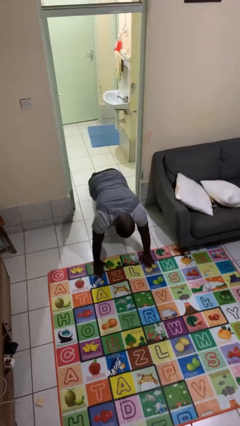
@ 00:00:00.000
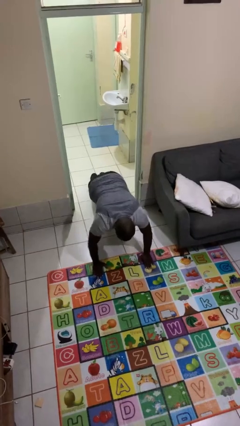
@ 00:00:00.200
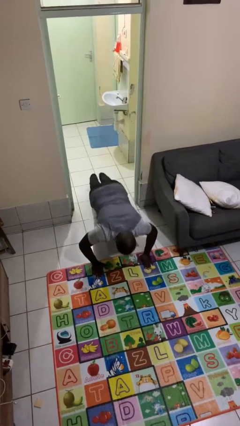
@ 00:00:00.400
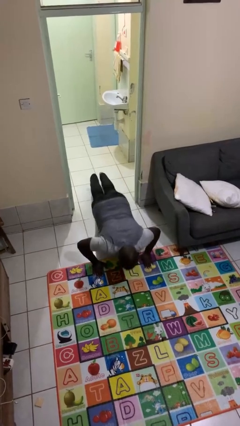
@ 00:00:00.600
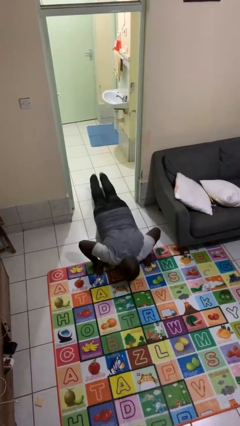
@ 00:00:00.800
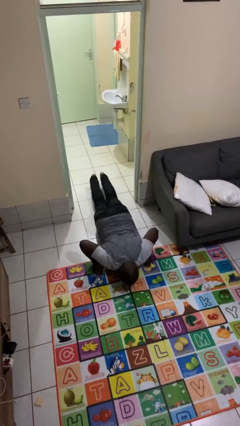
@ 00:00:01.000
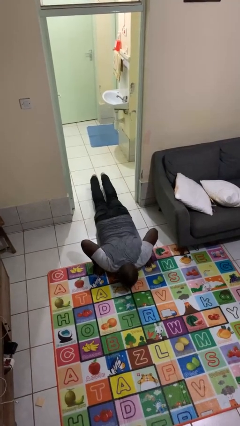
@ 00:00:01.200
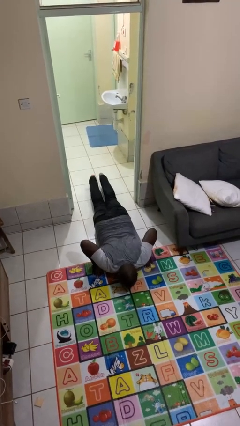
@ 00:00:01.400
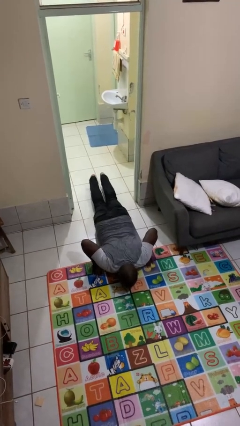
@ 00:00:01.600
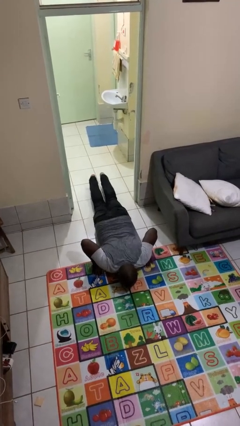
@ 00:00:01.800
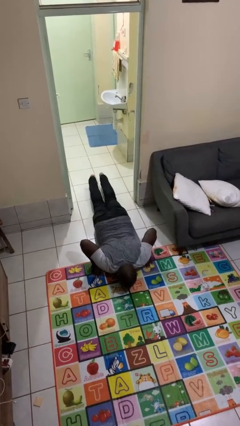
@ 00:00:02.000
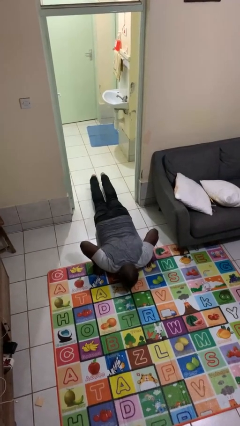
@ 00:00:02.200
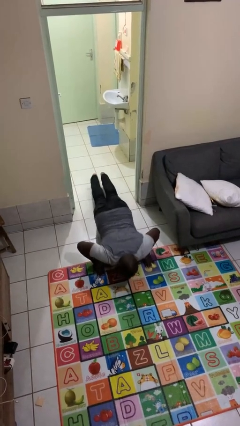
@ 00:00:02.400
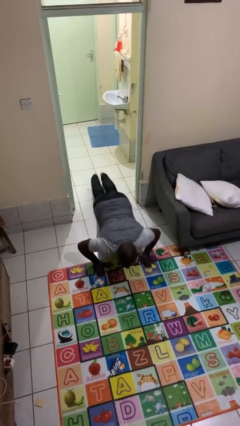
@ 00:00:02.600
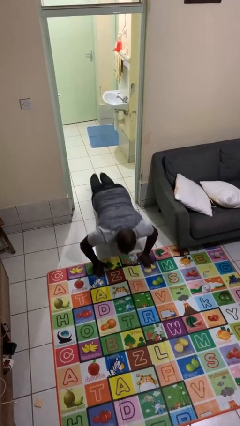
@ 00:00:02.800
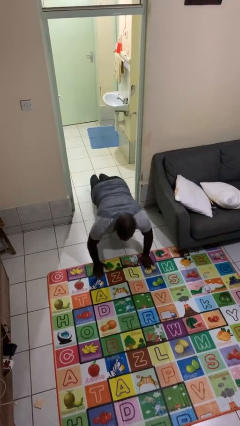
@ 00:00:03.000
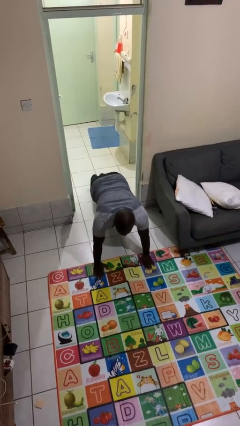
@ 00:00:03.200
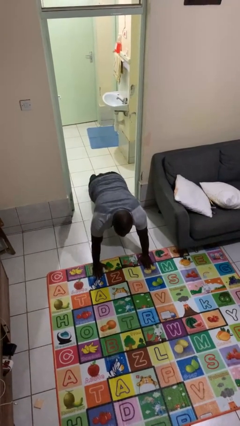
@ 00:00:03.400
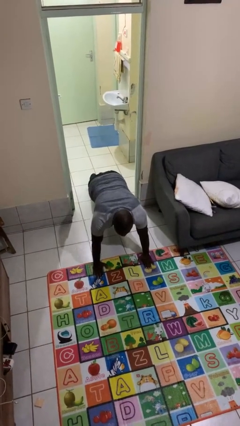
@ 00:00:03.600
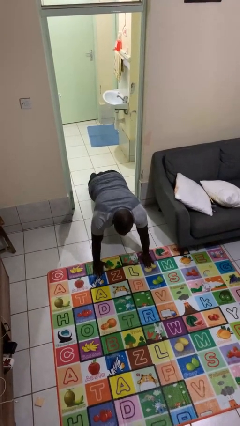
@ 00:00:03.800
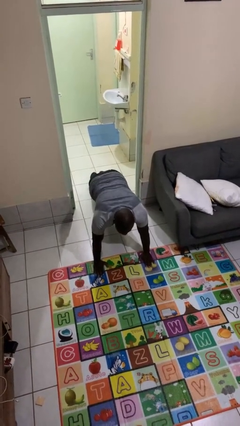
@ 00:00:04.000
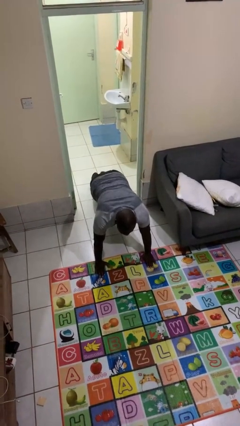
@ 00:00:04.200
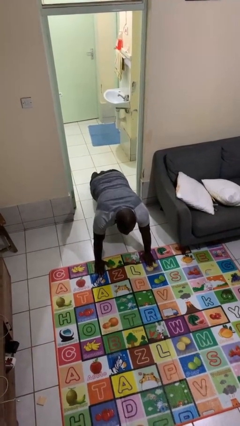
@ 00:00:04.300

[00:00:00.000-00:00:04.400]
person exercises with pushup

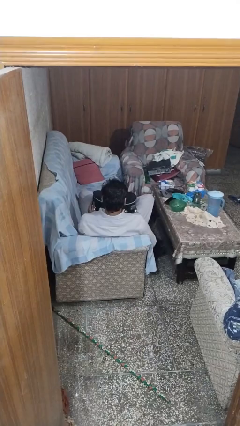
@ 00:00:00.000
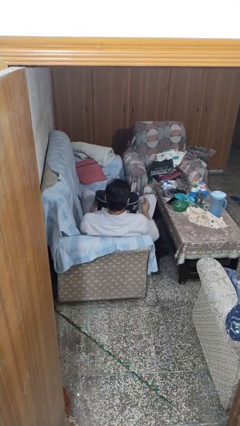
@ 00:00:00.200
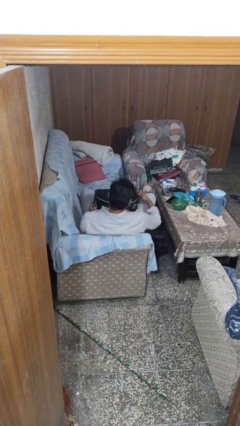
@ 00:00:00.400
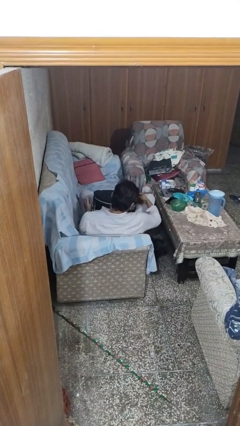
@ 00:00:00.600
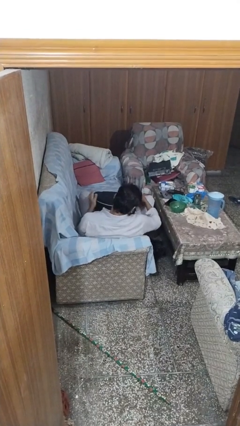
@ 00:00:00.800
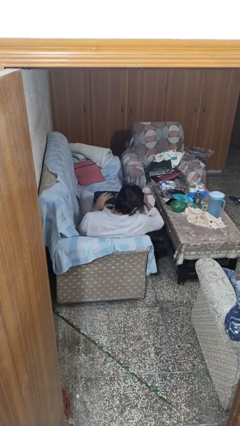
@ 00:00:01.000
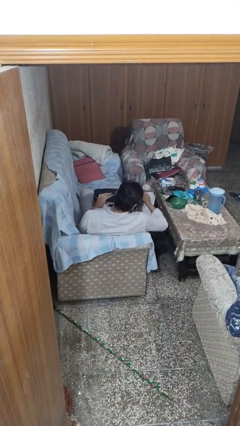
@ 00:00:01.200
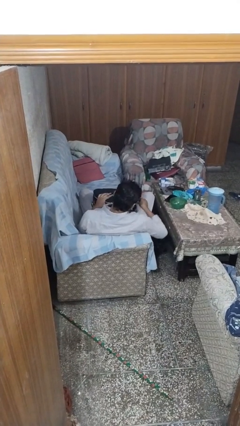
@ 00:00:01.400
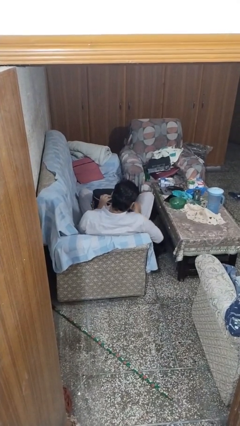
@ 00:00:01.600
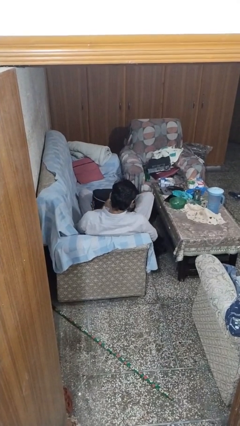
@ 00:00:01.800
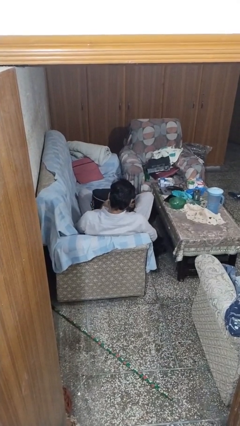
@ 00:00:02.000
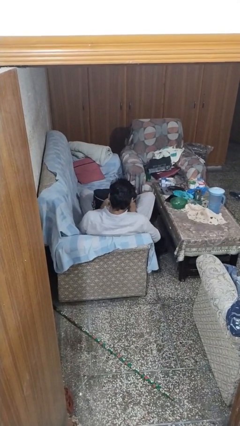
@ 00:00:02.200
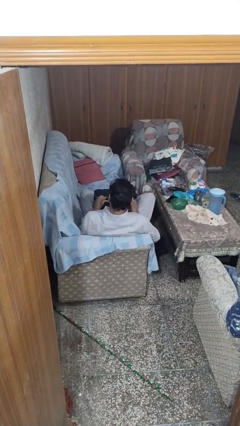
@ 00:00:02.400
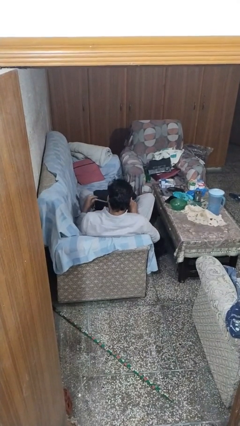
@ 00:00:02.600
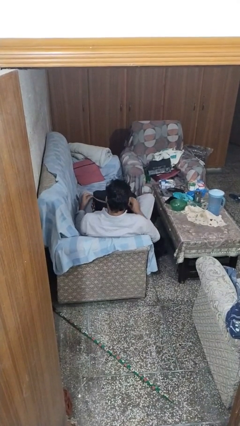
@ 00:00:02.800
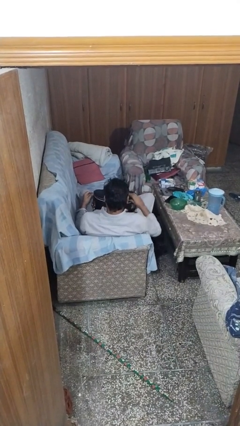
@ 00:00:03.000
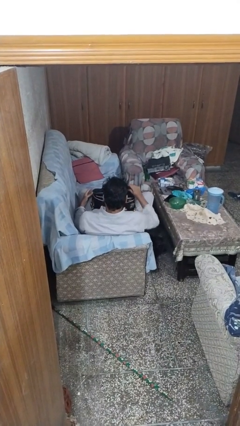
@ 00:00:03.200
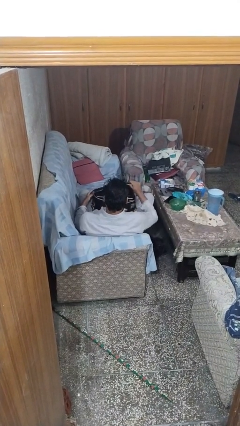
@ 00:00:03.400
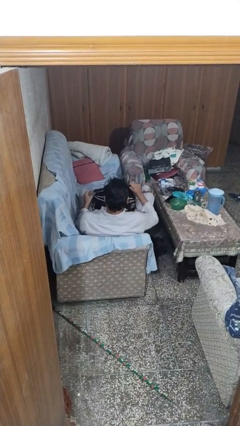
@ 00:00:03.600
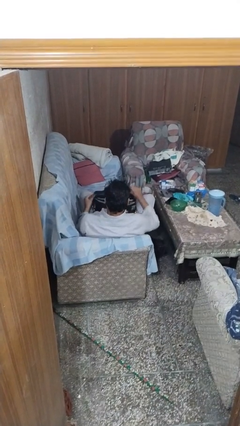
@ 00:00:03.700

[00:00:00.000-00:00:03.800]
person opens suitcase

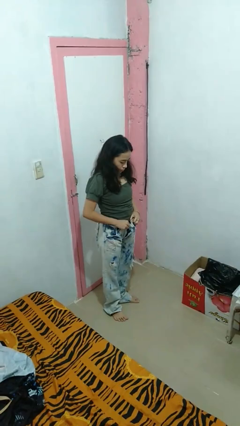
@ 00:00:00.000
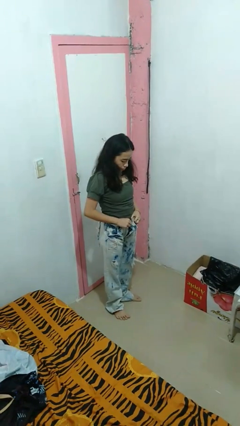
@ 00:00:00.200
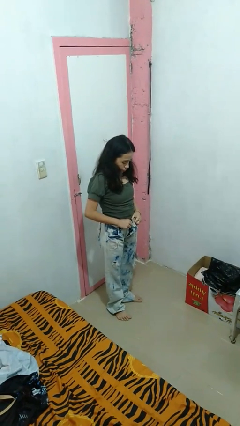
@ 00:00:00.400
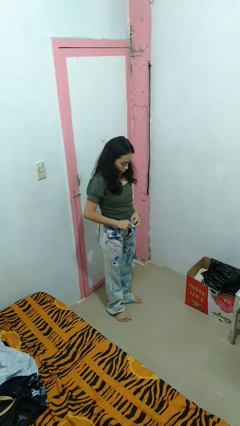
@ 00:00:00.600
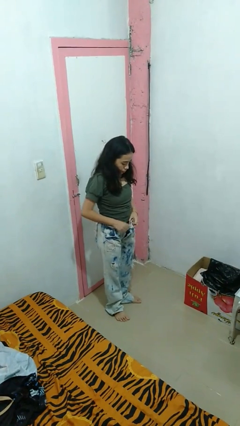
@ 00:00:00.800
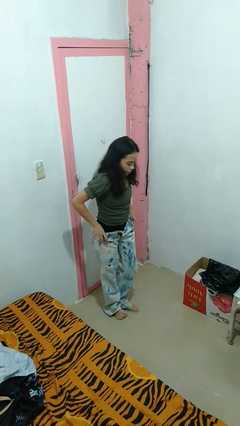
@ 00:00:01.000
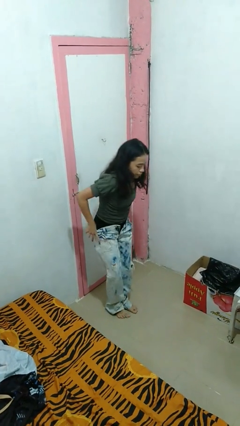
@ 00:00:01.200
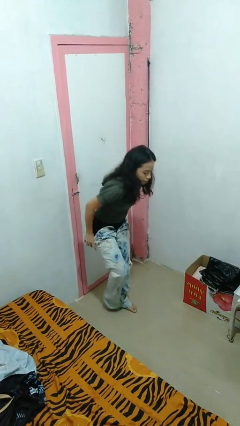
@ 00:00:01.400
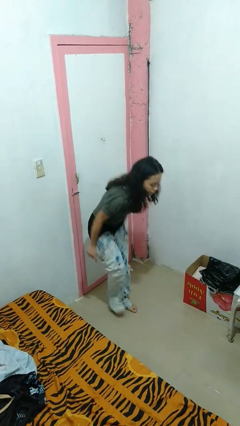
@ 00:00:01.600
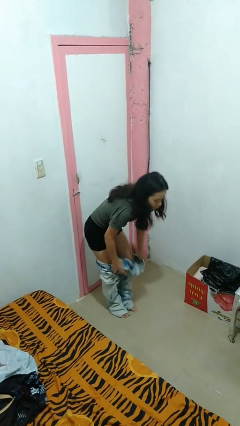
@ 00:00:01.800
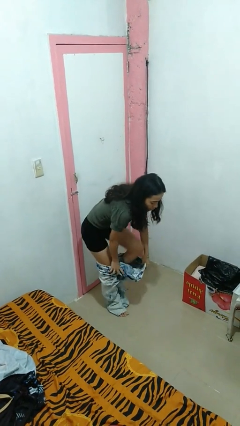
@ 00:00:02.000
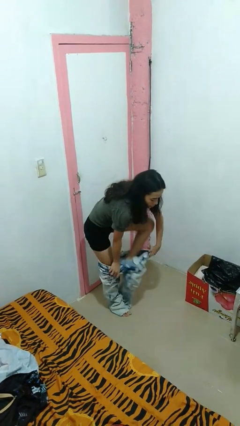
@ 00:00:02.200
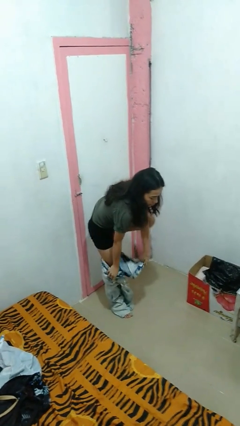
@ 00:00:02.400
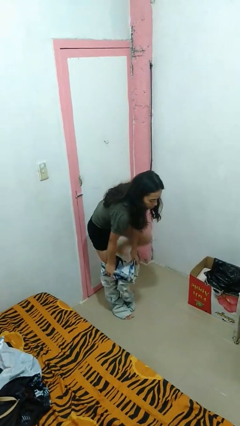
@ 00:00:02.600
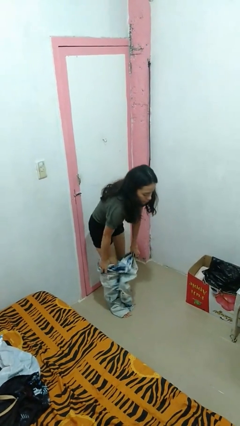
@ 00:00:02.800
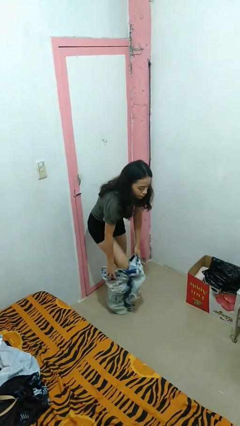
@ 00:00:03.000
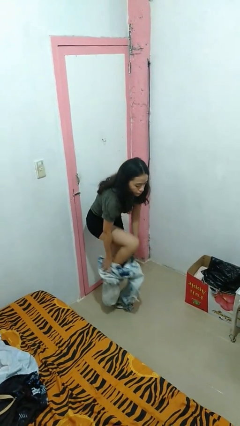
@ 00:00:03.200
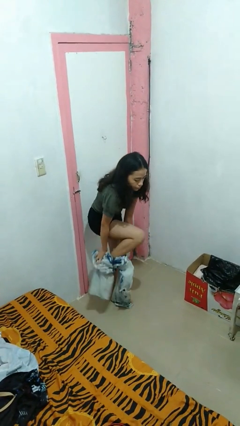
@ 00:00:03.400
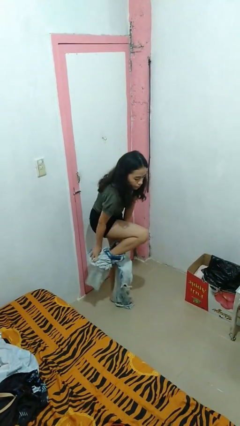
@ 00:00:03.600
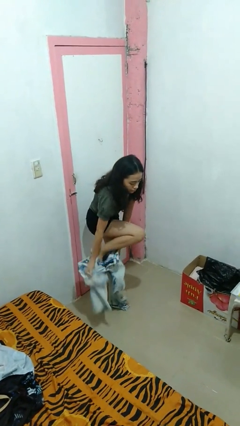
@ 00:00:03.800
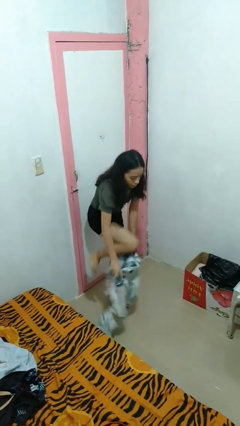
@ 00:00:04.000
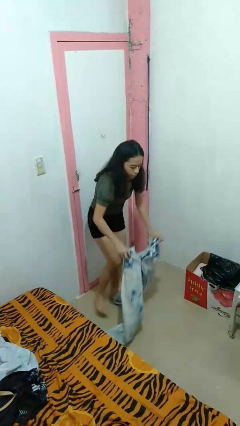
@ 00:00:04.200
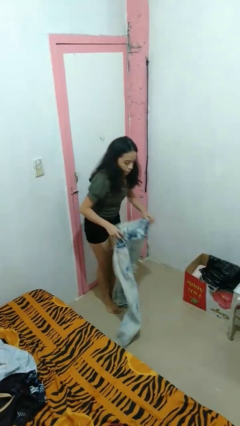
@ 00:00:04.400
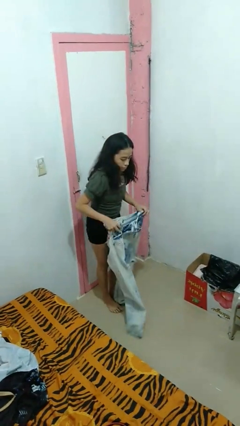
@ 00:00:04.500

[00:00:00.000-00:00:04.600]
person takes off pants

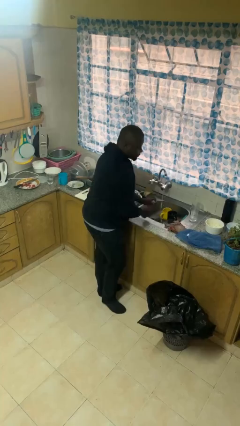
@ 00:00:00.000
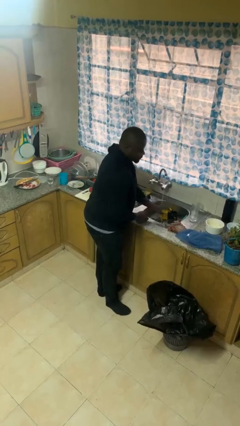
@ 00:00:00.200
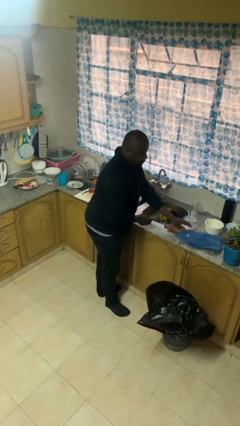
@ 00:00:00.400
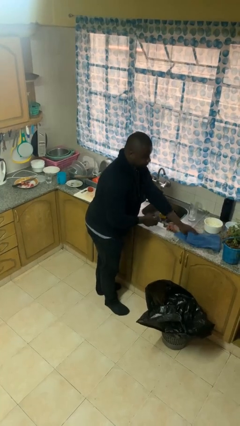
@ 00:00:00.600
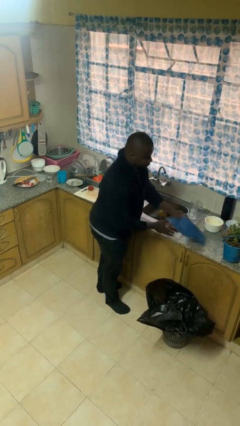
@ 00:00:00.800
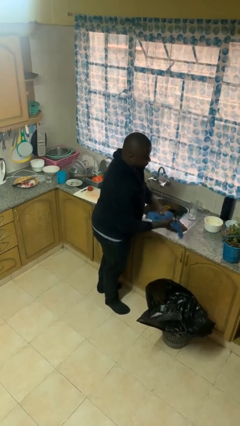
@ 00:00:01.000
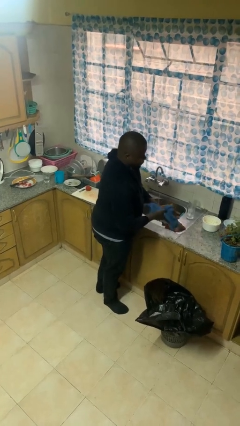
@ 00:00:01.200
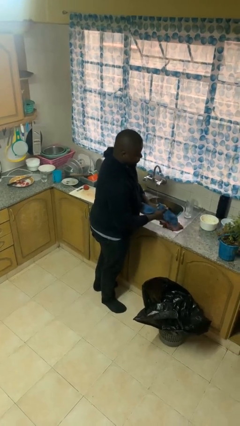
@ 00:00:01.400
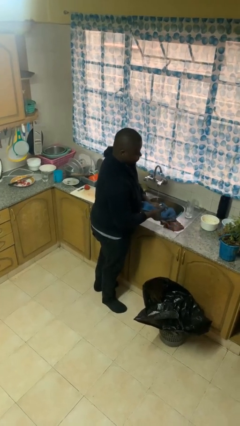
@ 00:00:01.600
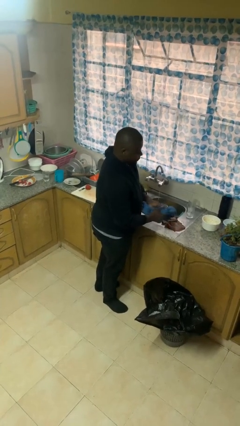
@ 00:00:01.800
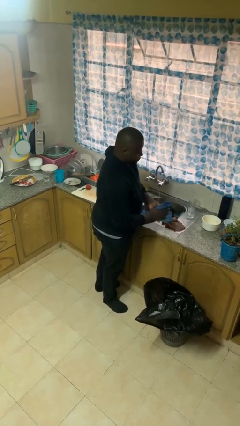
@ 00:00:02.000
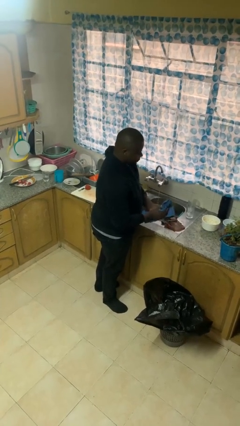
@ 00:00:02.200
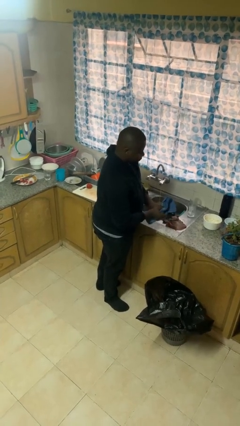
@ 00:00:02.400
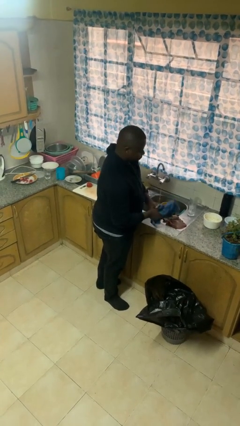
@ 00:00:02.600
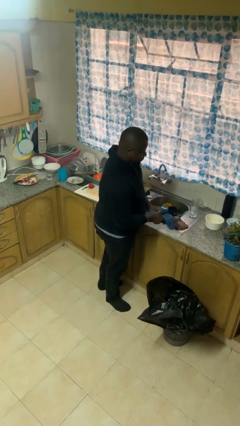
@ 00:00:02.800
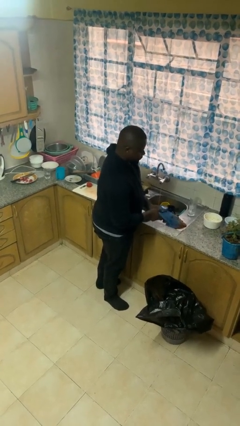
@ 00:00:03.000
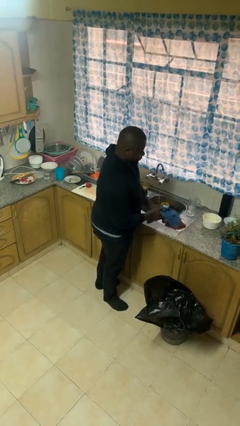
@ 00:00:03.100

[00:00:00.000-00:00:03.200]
person dries hands with towel

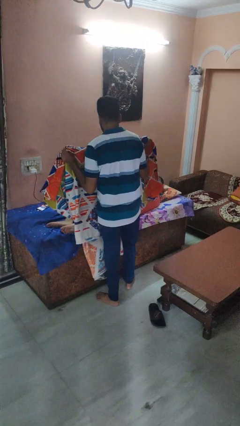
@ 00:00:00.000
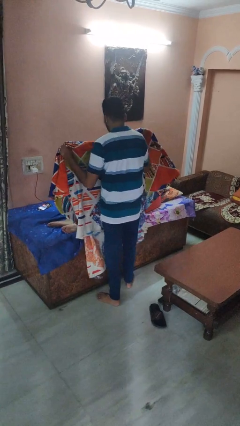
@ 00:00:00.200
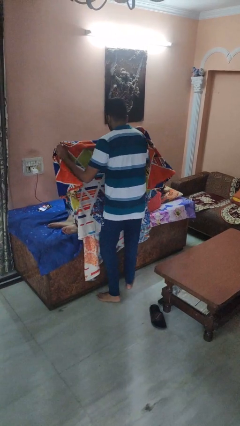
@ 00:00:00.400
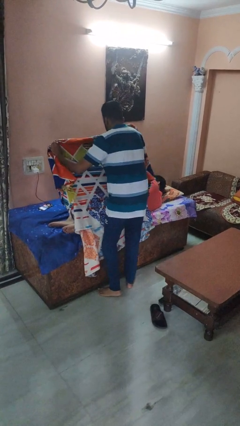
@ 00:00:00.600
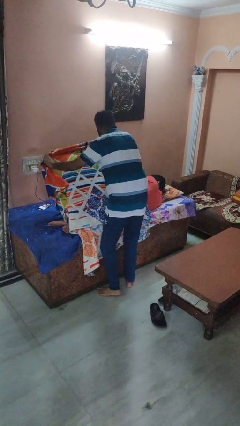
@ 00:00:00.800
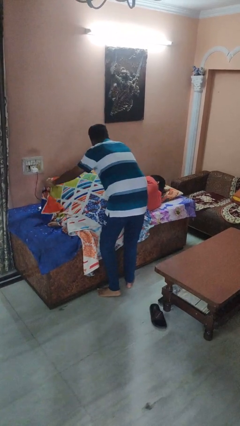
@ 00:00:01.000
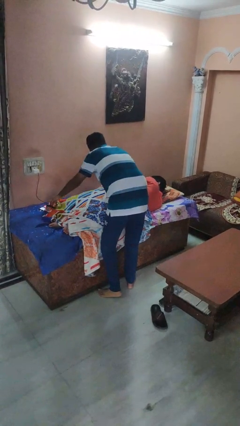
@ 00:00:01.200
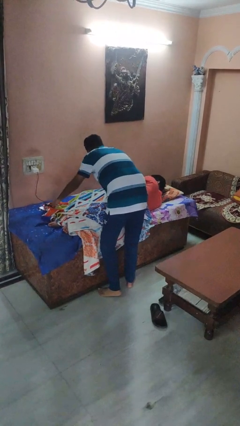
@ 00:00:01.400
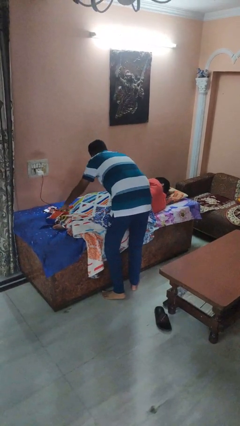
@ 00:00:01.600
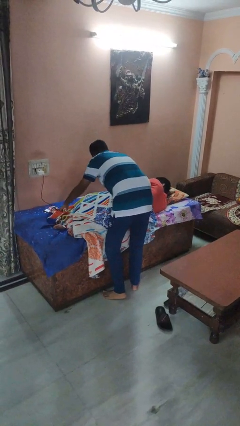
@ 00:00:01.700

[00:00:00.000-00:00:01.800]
person covers friend with blanket
